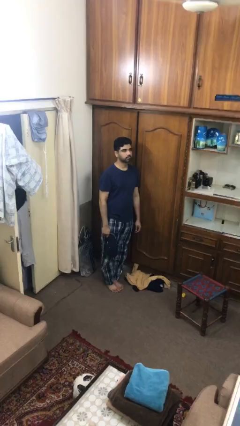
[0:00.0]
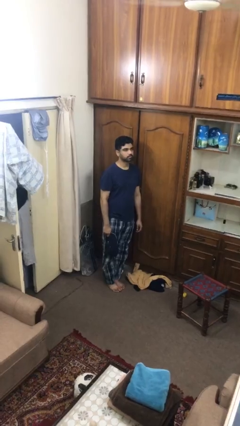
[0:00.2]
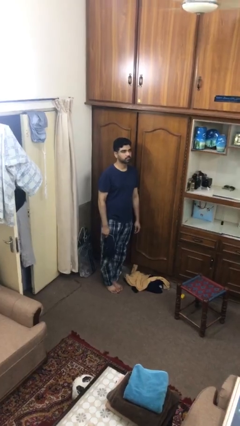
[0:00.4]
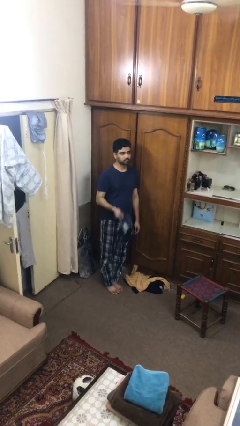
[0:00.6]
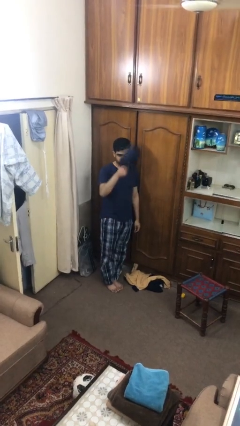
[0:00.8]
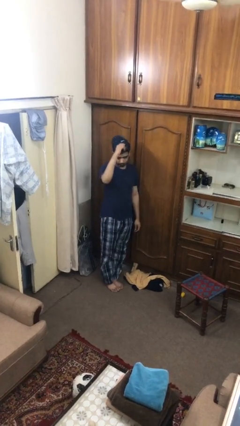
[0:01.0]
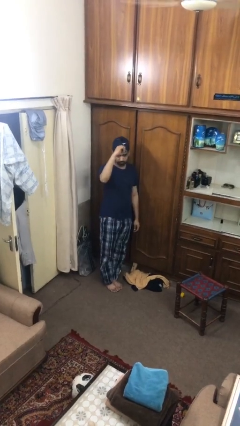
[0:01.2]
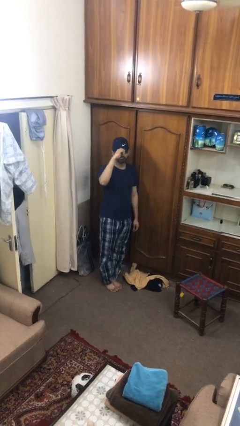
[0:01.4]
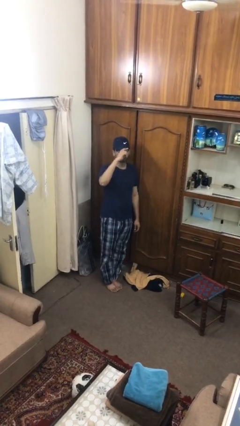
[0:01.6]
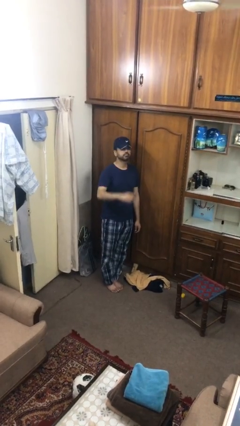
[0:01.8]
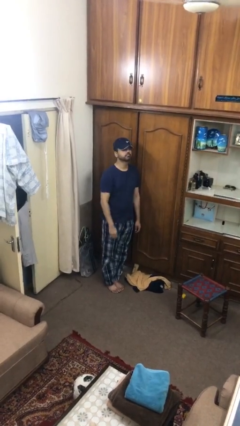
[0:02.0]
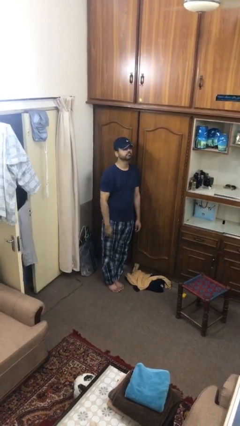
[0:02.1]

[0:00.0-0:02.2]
person puts on hat

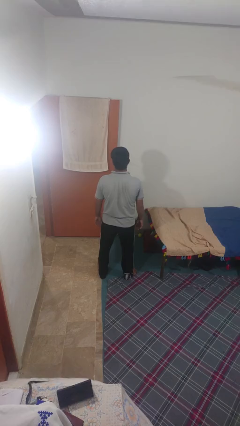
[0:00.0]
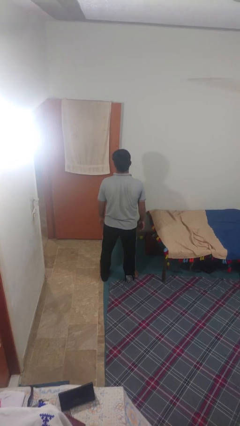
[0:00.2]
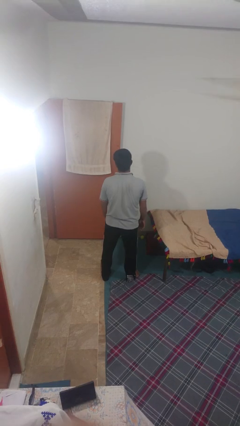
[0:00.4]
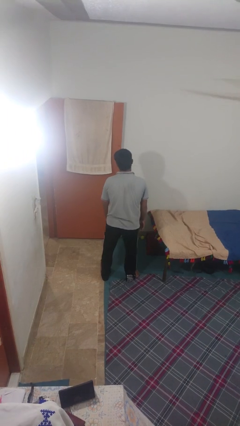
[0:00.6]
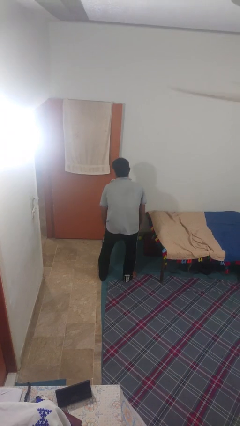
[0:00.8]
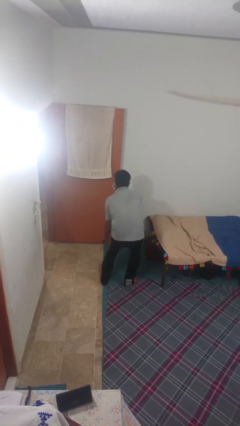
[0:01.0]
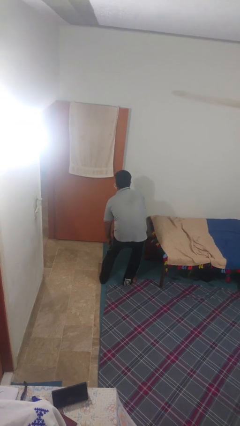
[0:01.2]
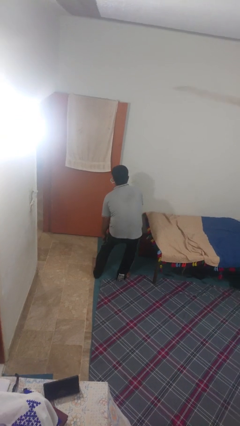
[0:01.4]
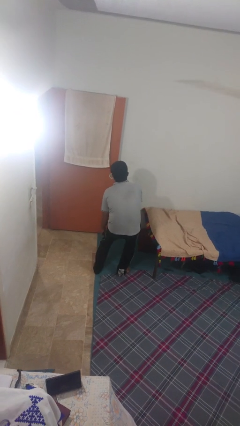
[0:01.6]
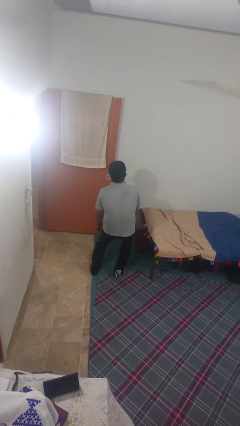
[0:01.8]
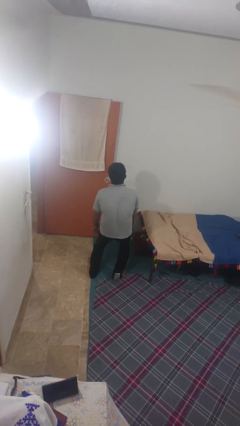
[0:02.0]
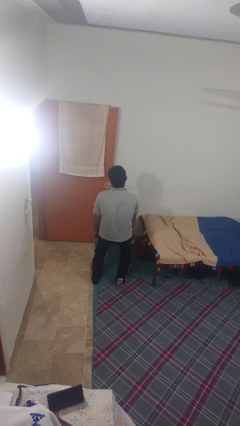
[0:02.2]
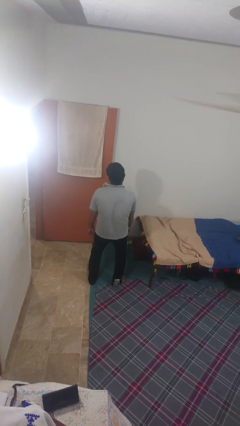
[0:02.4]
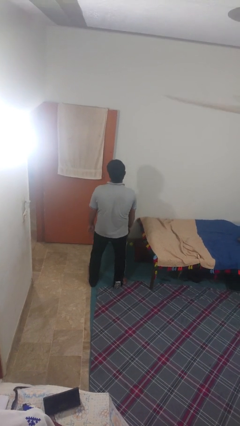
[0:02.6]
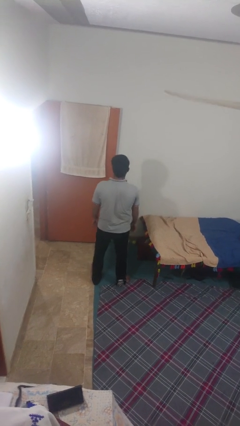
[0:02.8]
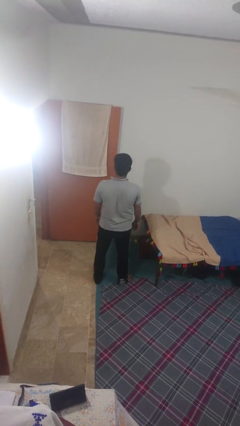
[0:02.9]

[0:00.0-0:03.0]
person gestures hang loose

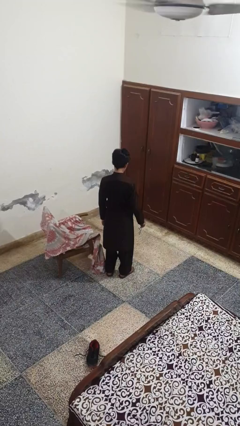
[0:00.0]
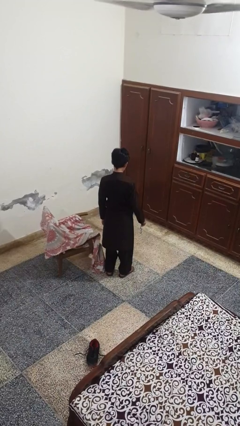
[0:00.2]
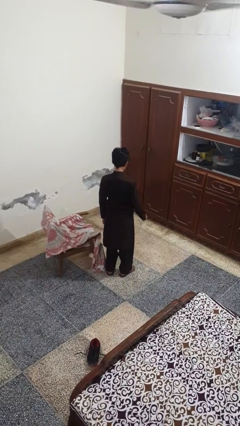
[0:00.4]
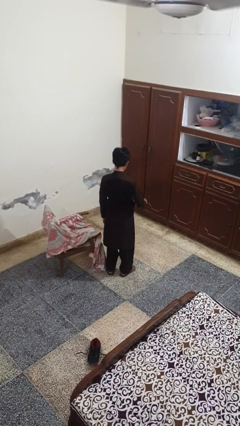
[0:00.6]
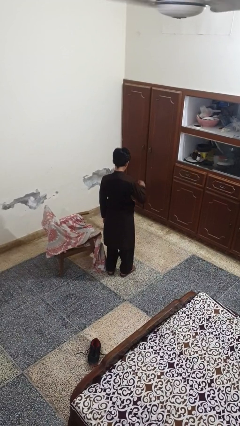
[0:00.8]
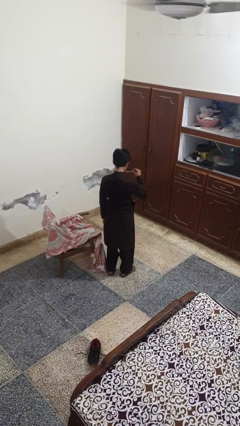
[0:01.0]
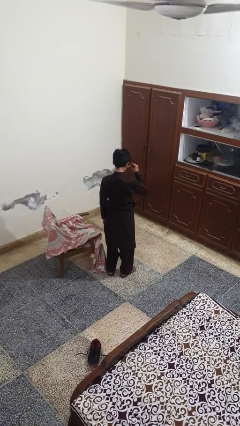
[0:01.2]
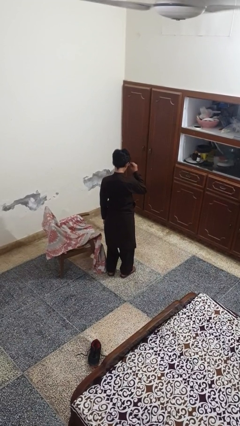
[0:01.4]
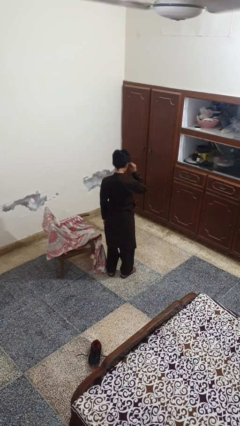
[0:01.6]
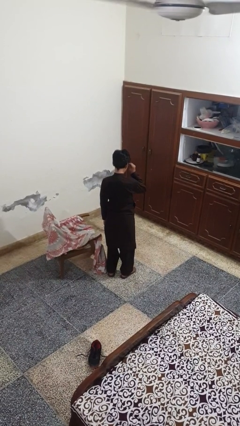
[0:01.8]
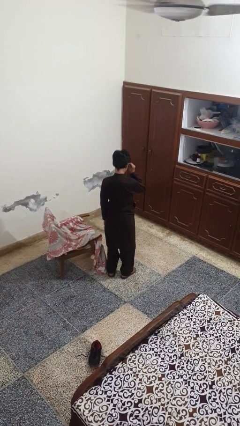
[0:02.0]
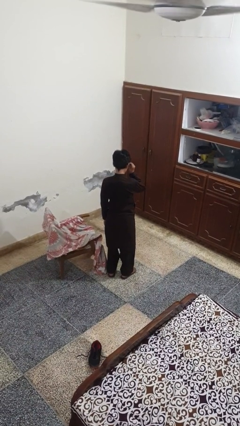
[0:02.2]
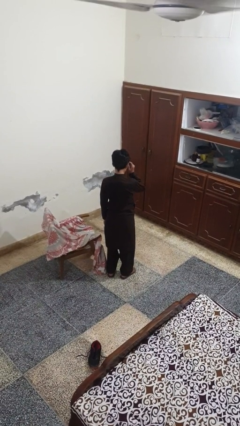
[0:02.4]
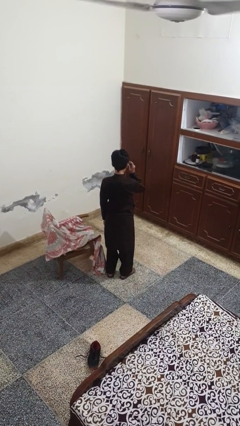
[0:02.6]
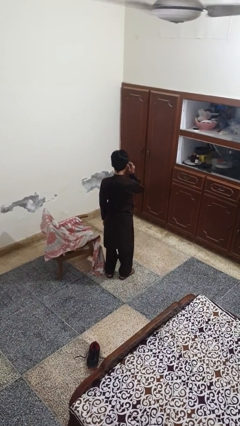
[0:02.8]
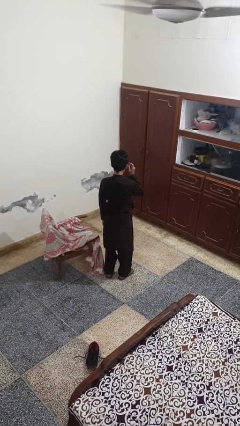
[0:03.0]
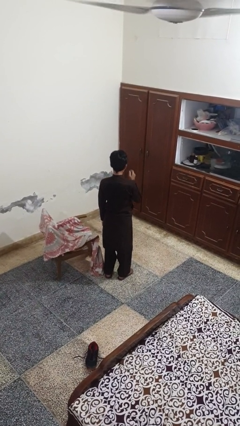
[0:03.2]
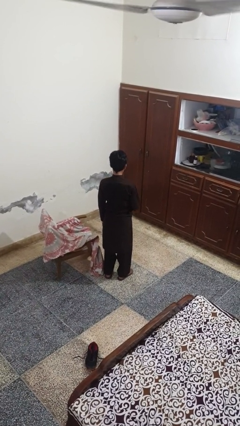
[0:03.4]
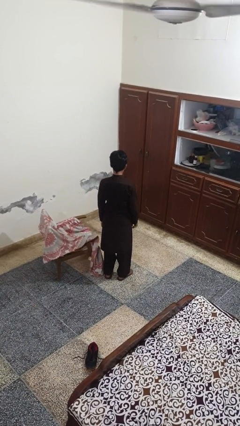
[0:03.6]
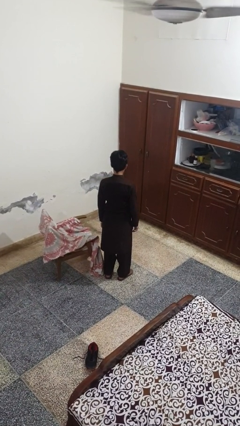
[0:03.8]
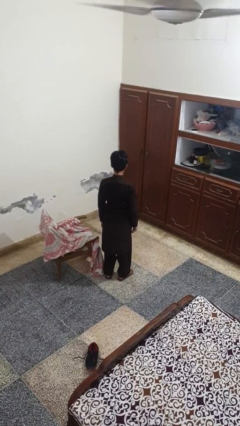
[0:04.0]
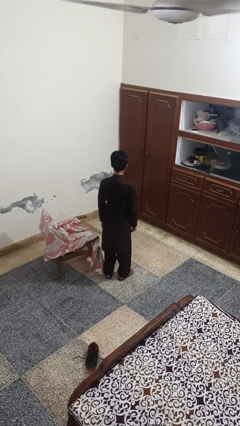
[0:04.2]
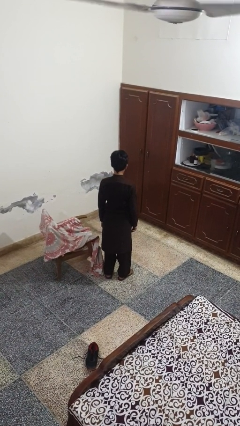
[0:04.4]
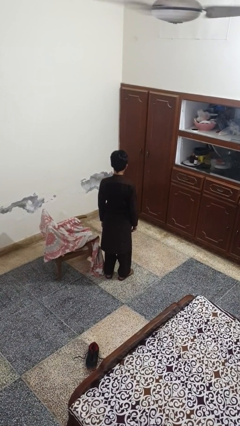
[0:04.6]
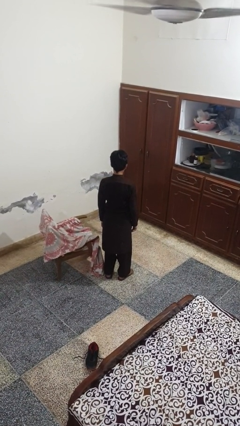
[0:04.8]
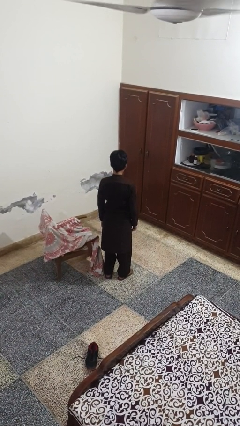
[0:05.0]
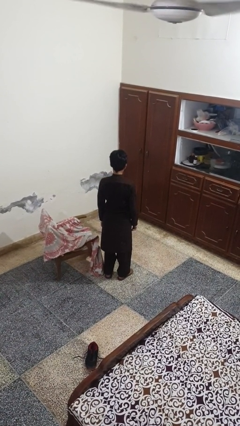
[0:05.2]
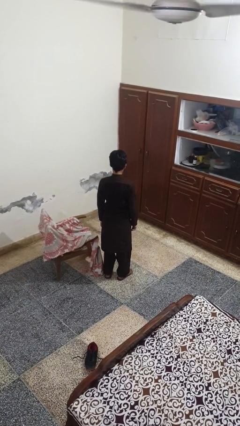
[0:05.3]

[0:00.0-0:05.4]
person puts on glasses

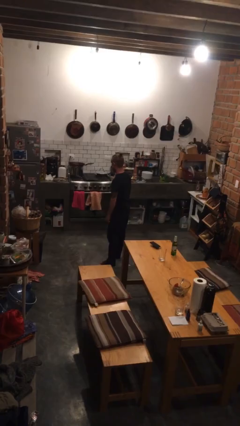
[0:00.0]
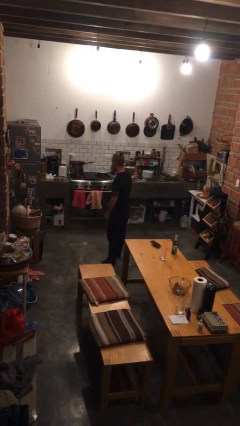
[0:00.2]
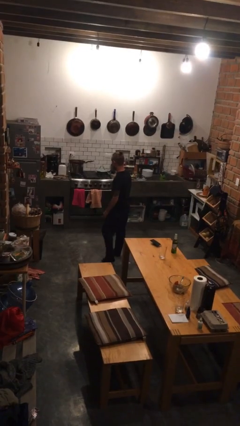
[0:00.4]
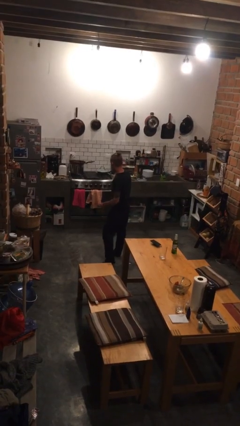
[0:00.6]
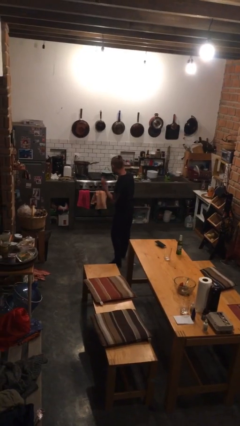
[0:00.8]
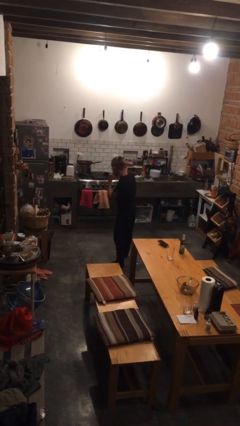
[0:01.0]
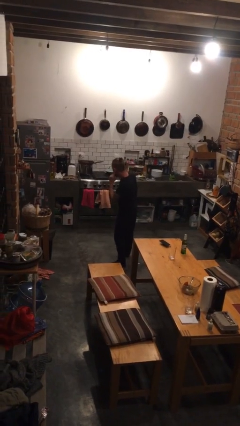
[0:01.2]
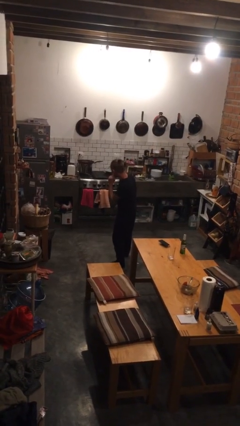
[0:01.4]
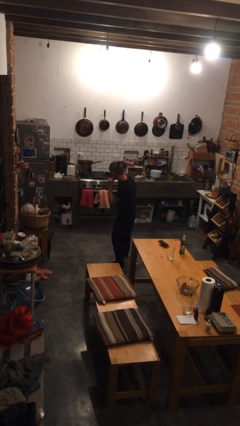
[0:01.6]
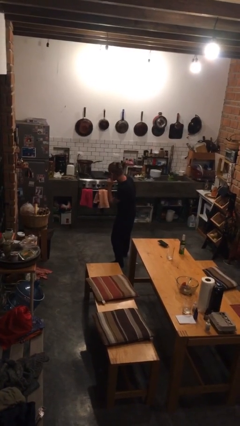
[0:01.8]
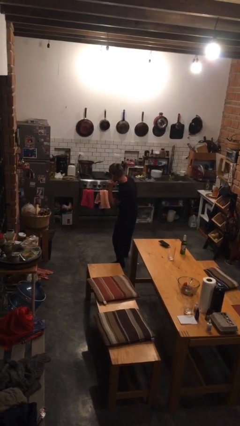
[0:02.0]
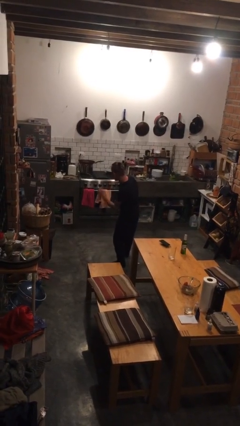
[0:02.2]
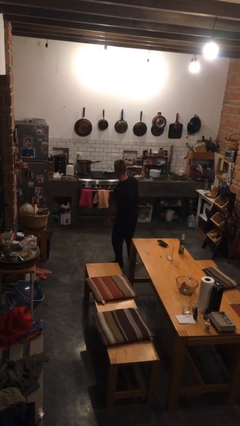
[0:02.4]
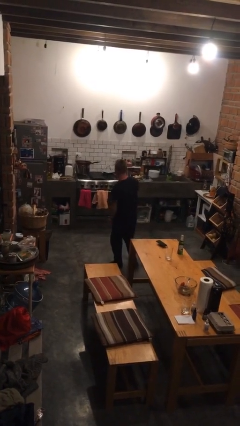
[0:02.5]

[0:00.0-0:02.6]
person gestures listen closely

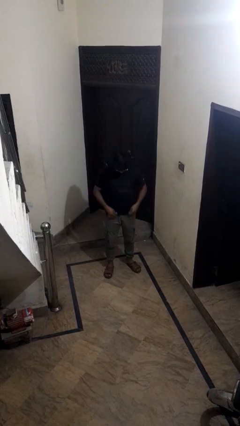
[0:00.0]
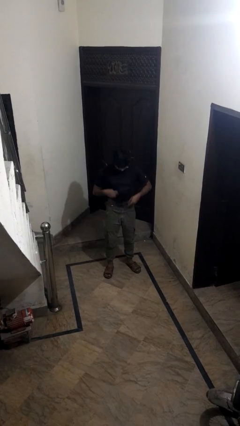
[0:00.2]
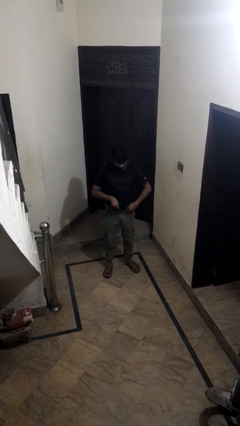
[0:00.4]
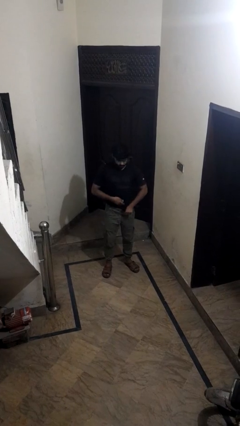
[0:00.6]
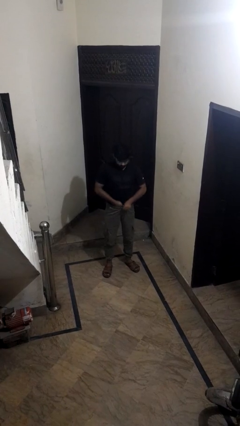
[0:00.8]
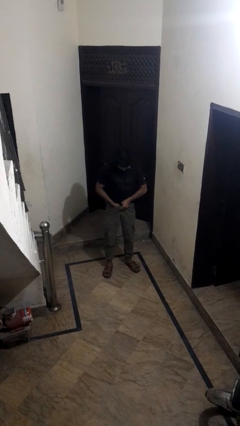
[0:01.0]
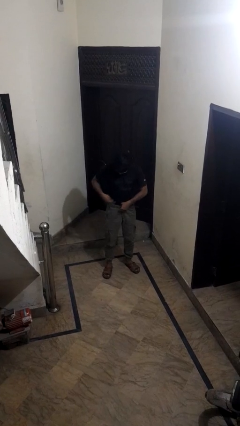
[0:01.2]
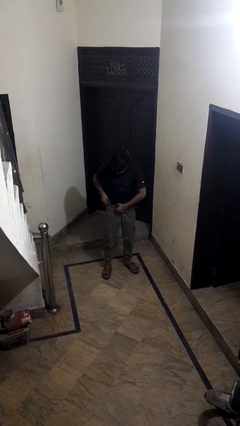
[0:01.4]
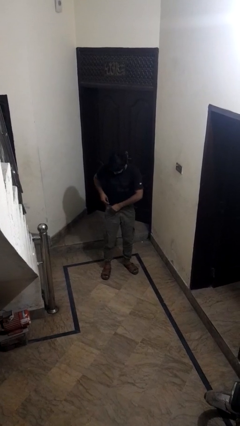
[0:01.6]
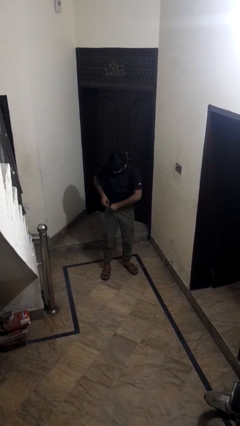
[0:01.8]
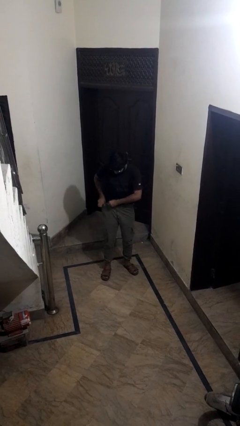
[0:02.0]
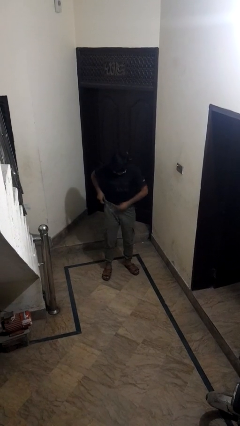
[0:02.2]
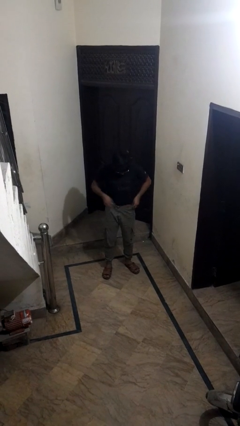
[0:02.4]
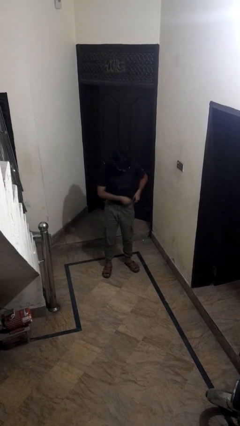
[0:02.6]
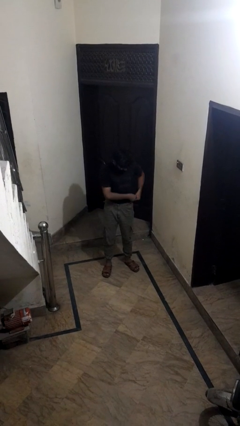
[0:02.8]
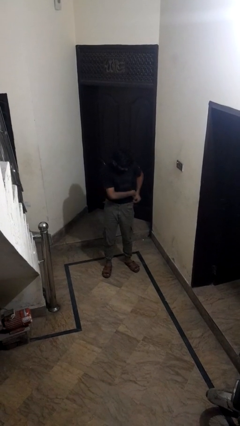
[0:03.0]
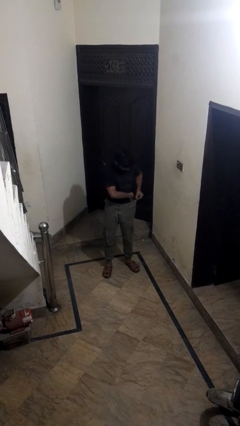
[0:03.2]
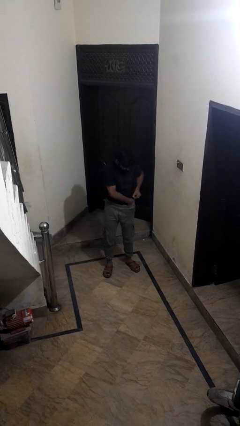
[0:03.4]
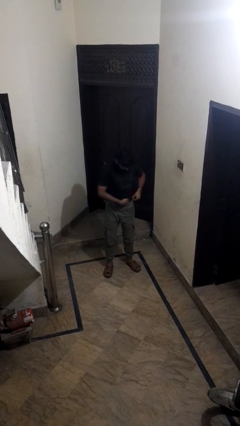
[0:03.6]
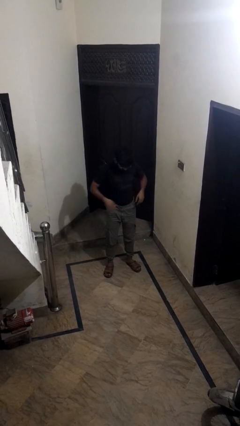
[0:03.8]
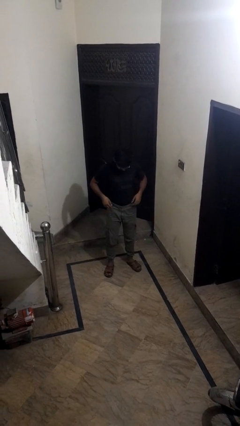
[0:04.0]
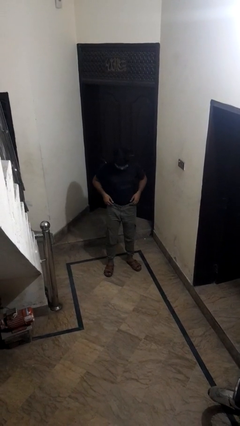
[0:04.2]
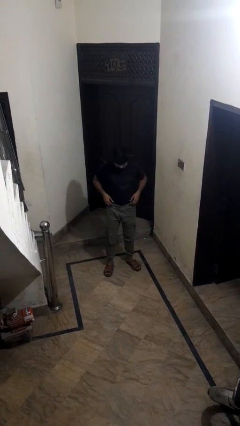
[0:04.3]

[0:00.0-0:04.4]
person tucks in shirt
